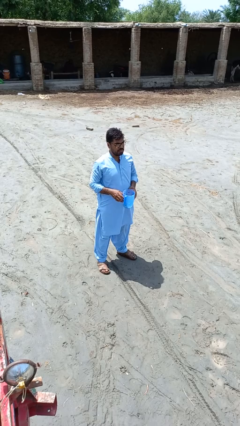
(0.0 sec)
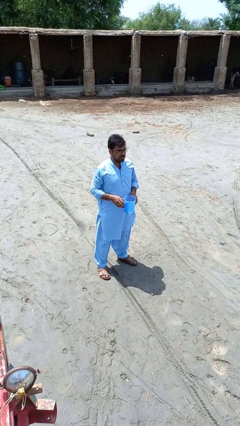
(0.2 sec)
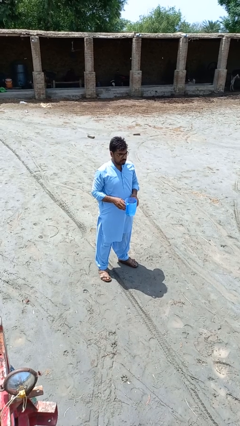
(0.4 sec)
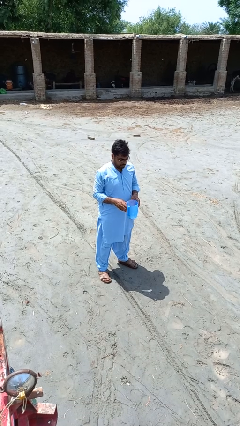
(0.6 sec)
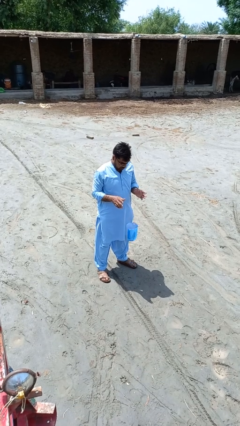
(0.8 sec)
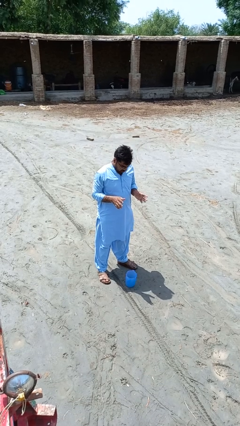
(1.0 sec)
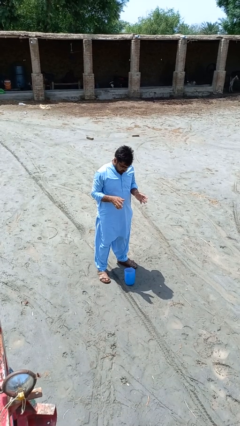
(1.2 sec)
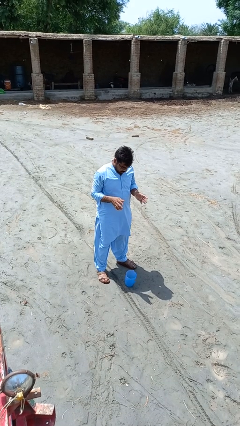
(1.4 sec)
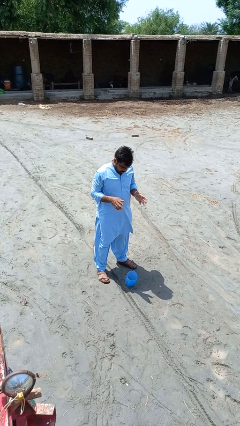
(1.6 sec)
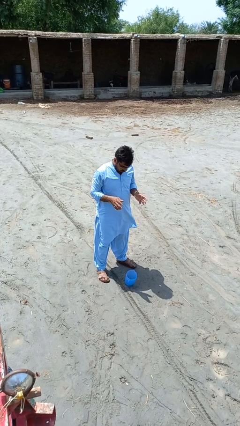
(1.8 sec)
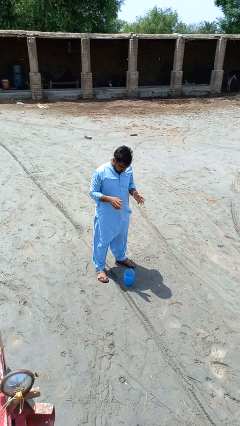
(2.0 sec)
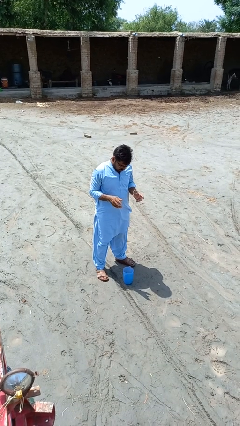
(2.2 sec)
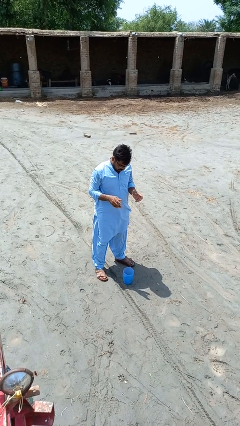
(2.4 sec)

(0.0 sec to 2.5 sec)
person drops object

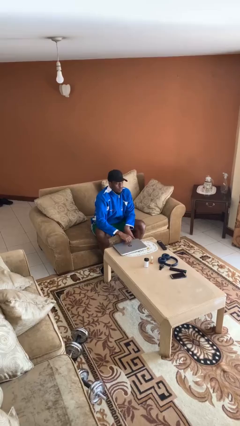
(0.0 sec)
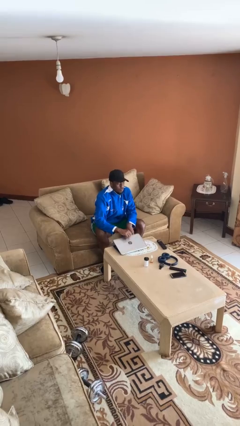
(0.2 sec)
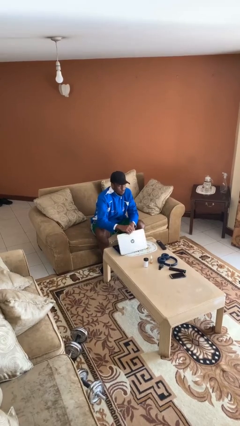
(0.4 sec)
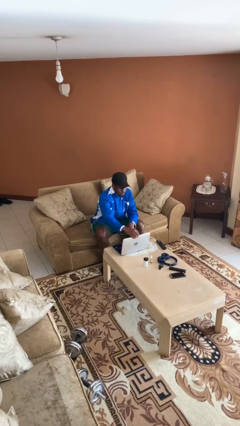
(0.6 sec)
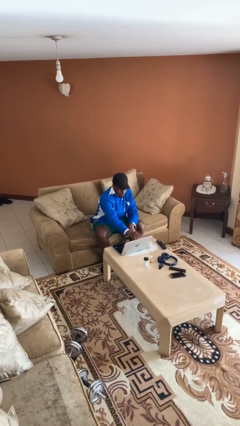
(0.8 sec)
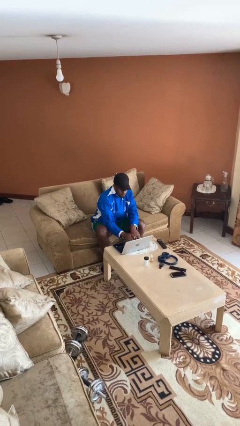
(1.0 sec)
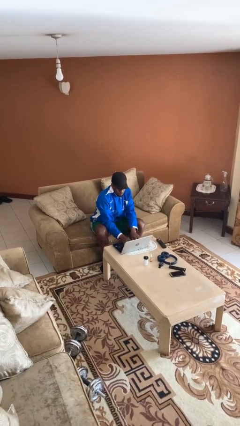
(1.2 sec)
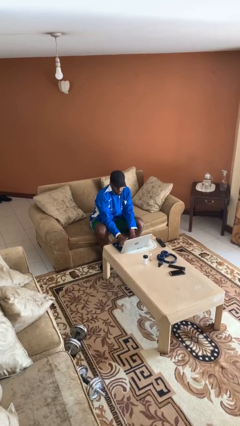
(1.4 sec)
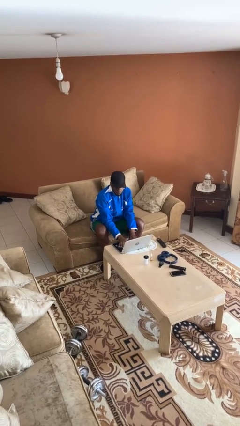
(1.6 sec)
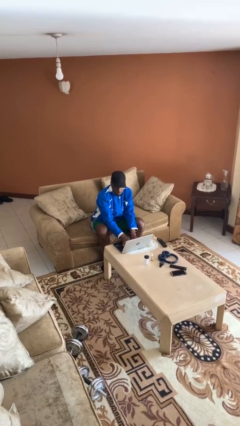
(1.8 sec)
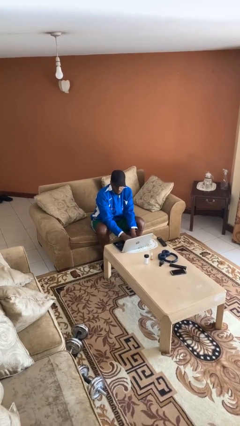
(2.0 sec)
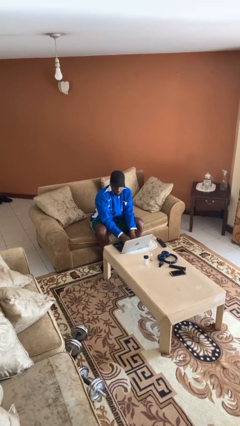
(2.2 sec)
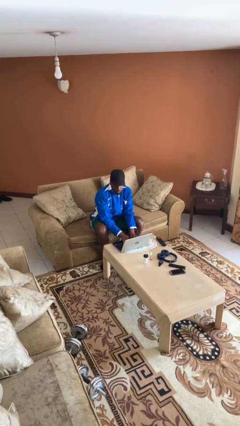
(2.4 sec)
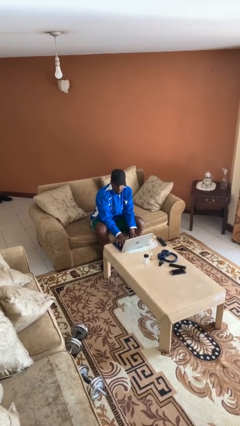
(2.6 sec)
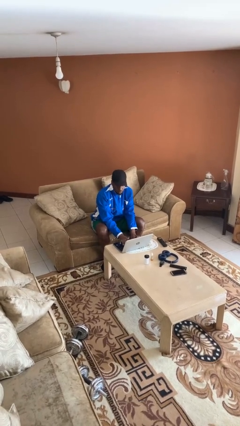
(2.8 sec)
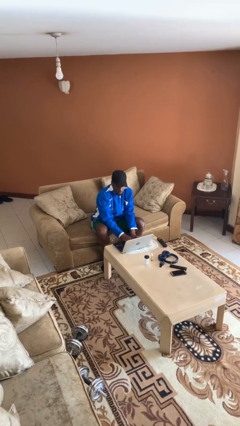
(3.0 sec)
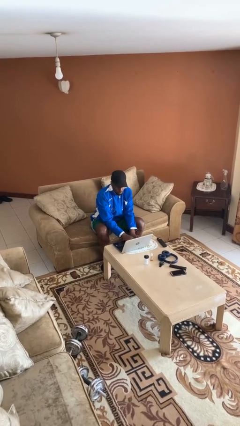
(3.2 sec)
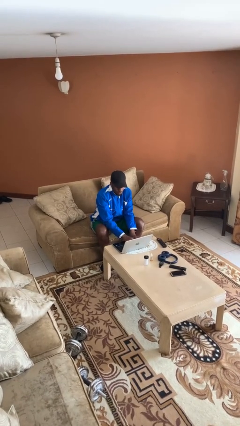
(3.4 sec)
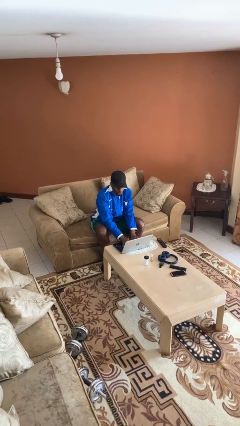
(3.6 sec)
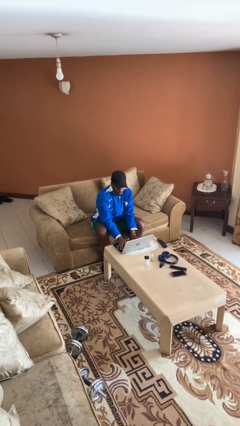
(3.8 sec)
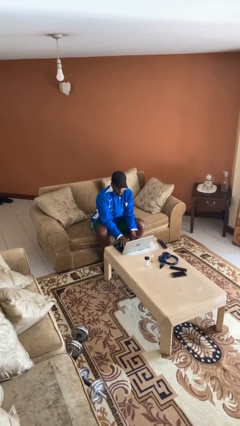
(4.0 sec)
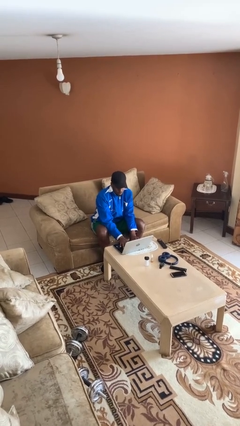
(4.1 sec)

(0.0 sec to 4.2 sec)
person interacts with laptop

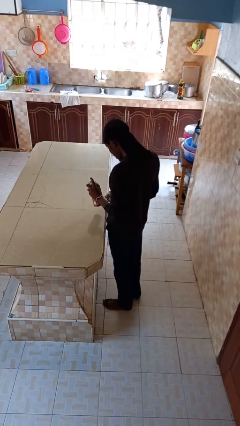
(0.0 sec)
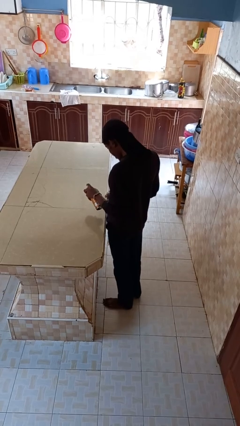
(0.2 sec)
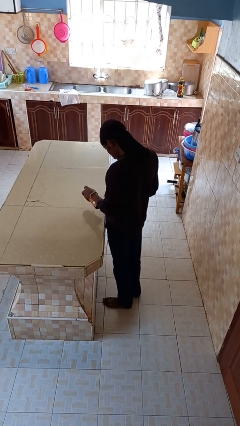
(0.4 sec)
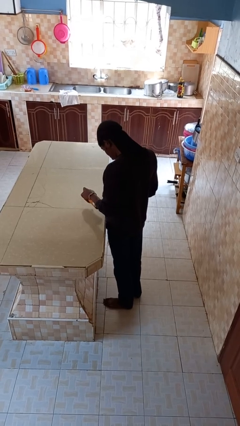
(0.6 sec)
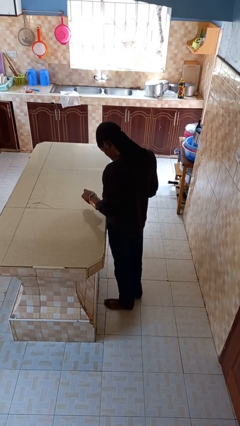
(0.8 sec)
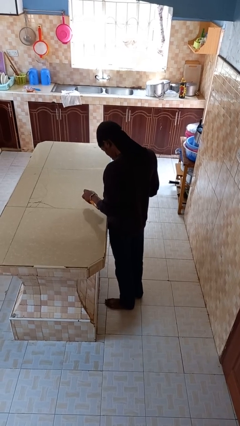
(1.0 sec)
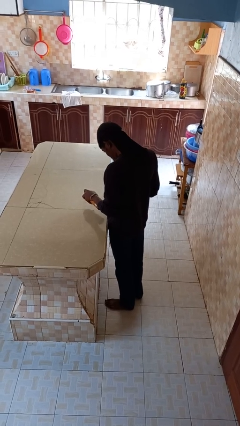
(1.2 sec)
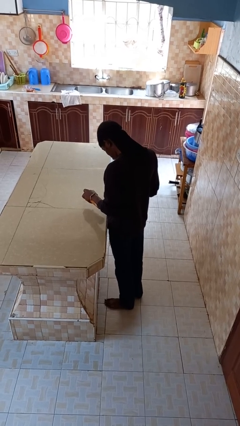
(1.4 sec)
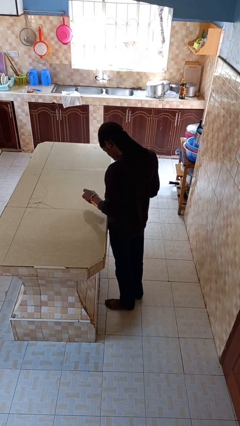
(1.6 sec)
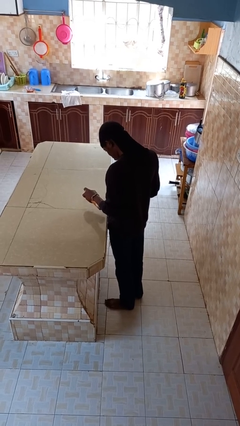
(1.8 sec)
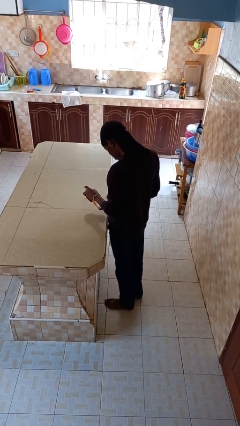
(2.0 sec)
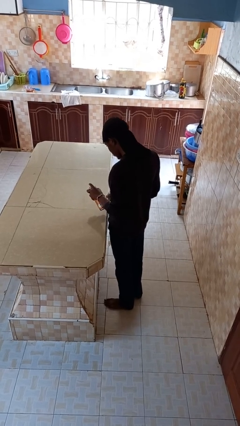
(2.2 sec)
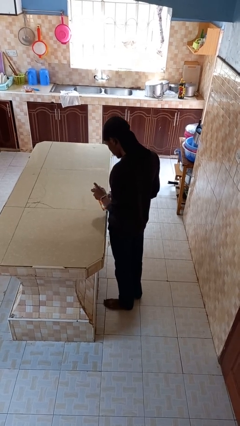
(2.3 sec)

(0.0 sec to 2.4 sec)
person sprays from bottle

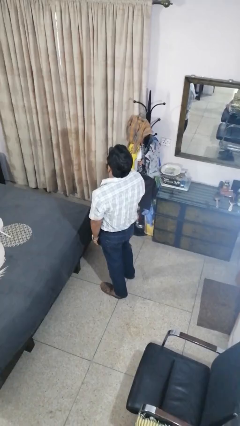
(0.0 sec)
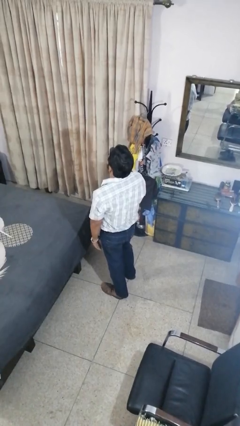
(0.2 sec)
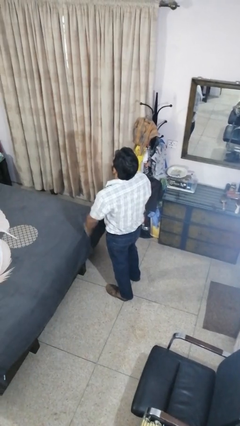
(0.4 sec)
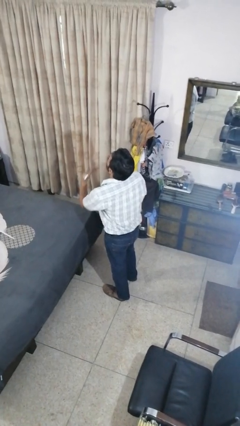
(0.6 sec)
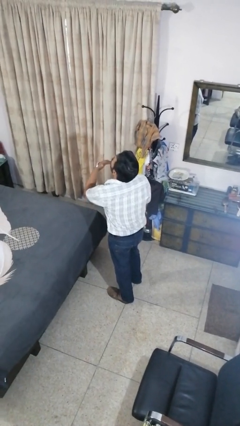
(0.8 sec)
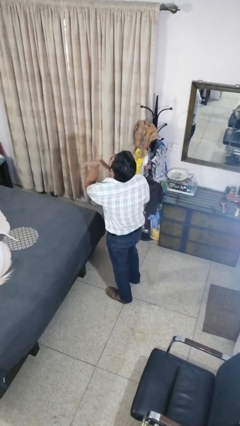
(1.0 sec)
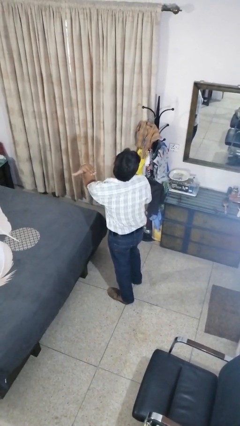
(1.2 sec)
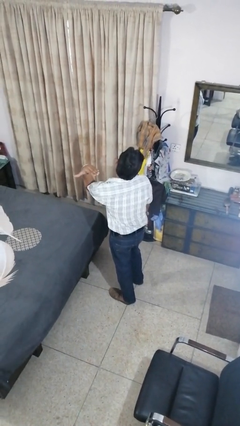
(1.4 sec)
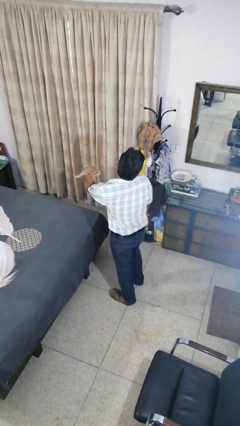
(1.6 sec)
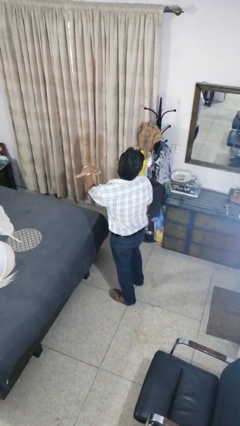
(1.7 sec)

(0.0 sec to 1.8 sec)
person gestures cut

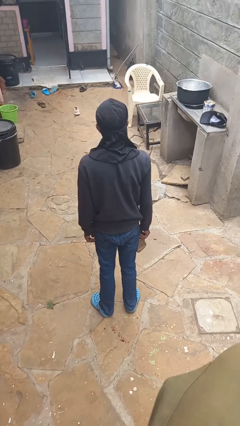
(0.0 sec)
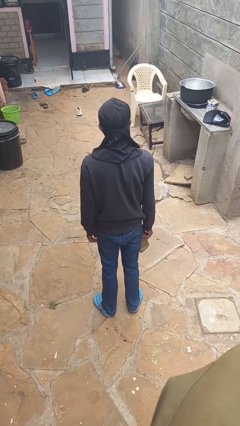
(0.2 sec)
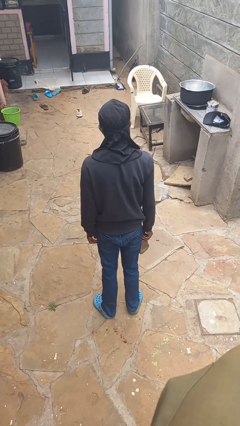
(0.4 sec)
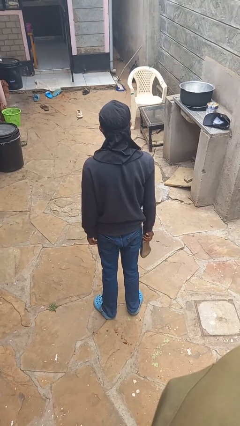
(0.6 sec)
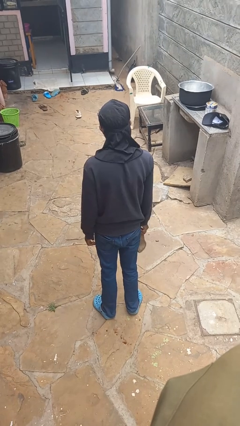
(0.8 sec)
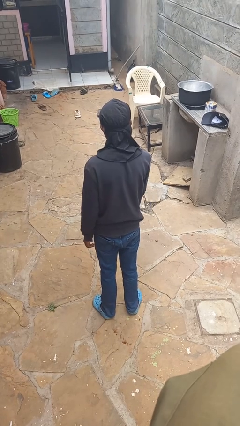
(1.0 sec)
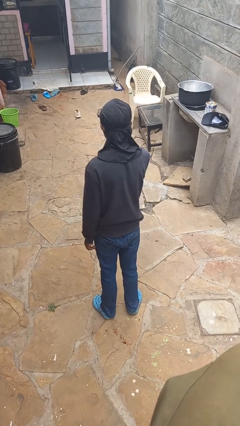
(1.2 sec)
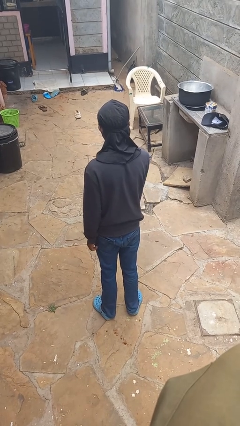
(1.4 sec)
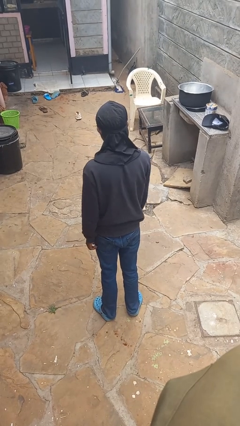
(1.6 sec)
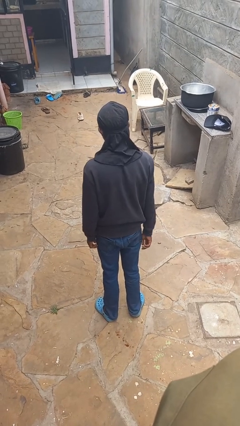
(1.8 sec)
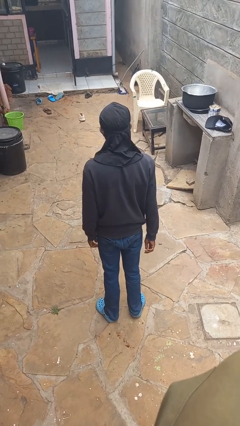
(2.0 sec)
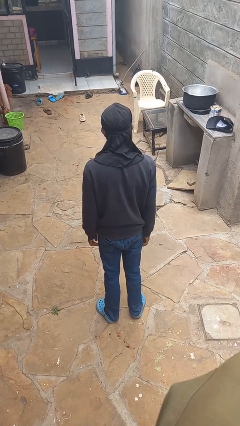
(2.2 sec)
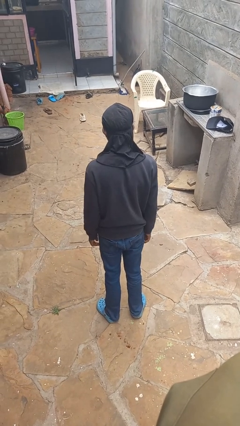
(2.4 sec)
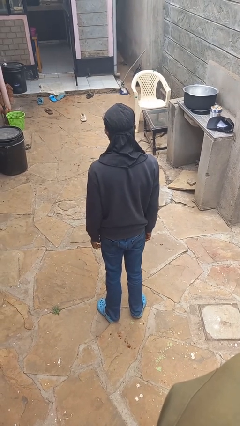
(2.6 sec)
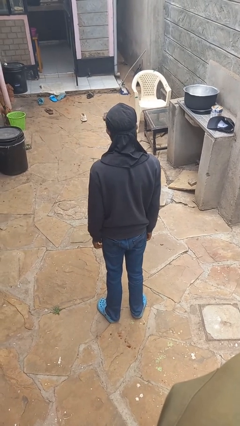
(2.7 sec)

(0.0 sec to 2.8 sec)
person throws object to ground

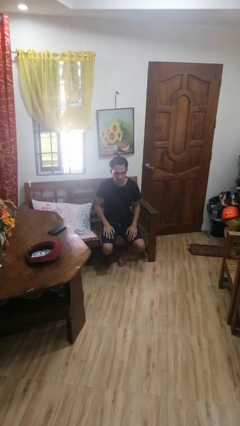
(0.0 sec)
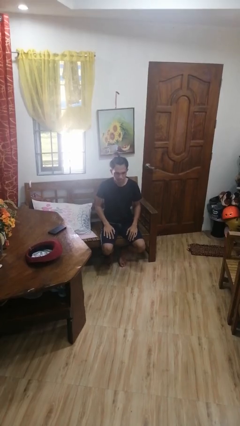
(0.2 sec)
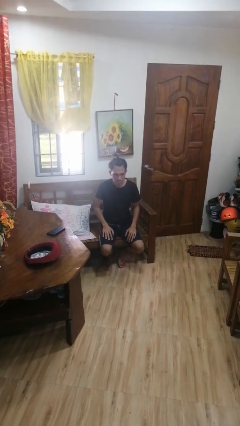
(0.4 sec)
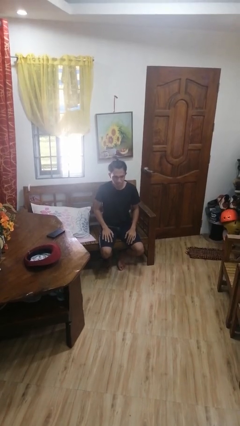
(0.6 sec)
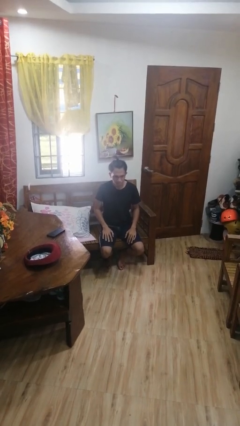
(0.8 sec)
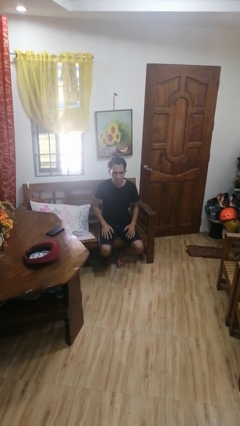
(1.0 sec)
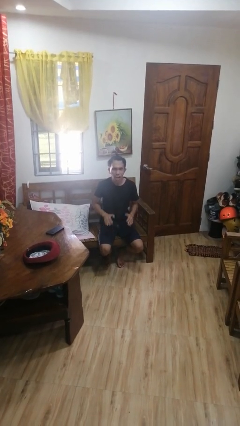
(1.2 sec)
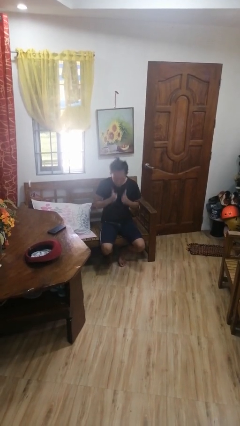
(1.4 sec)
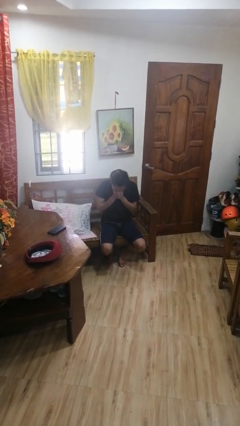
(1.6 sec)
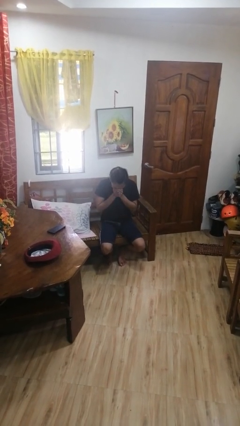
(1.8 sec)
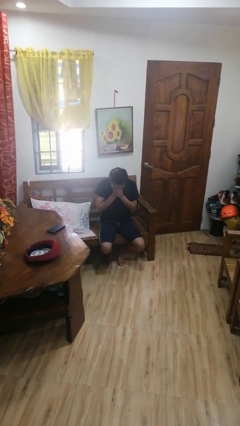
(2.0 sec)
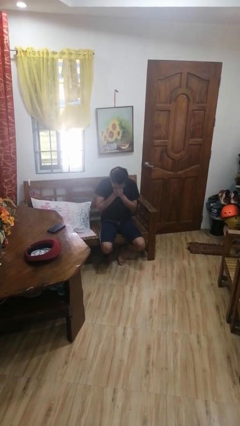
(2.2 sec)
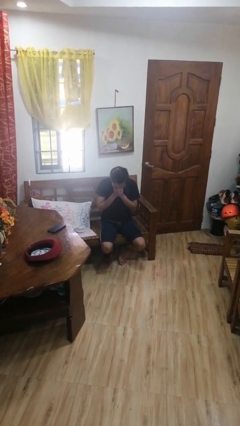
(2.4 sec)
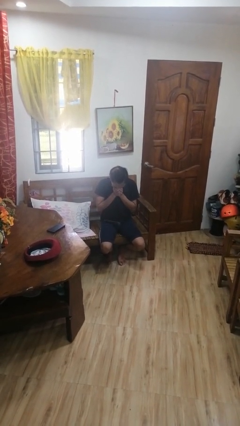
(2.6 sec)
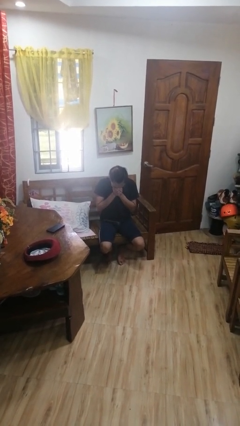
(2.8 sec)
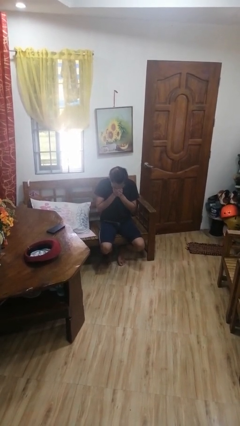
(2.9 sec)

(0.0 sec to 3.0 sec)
person sneezes into hand

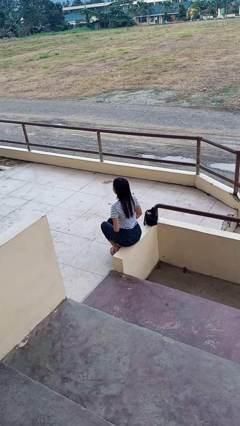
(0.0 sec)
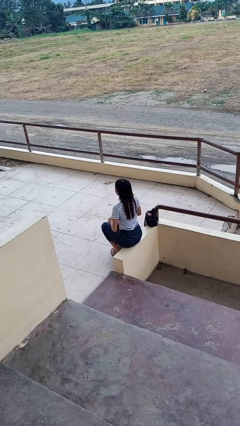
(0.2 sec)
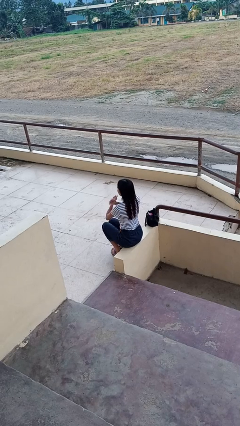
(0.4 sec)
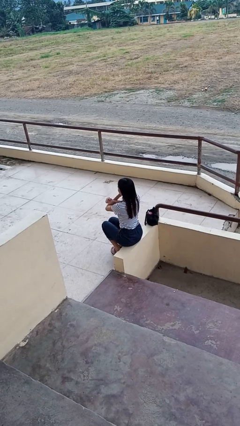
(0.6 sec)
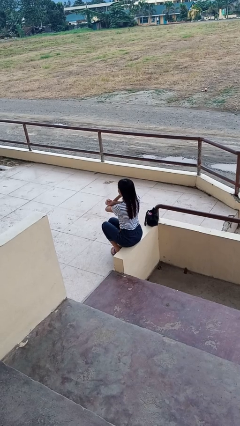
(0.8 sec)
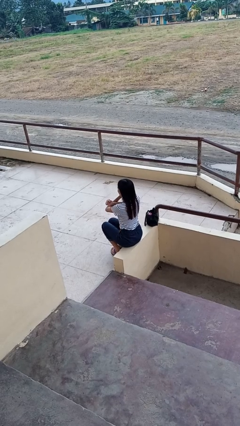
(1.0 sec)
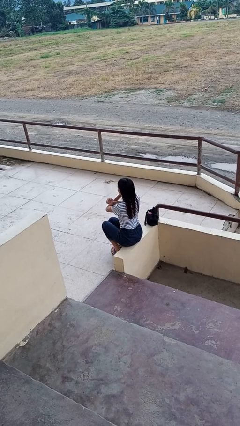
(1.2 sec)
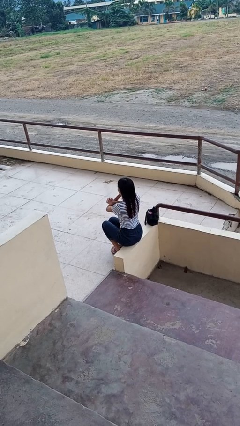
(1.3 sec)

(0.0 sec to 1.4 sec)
person gestures arms x
